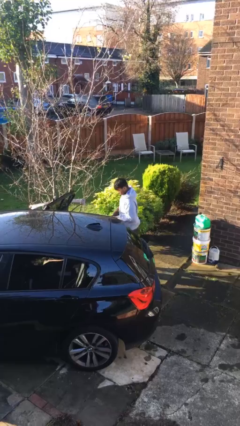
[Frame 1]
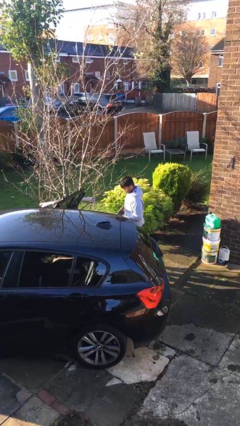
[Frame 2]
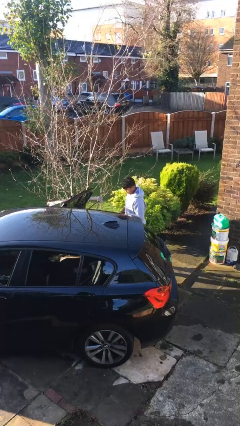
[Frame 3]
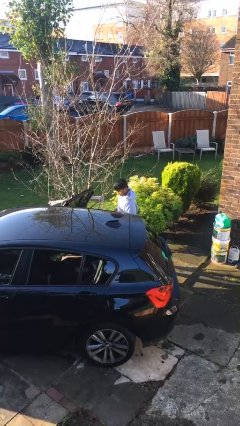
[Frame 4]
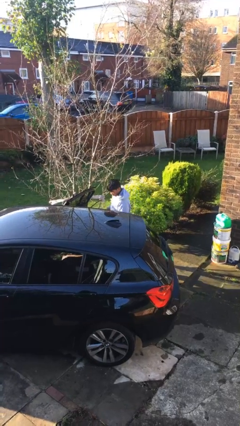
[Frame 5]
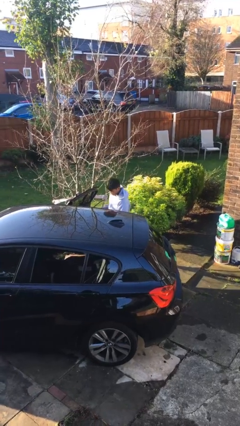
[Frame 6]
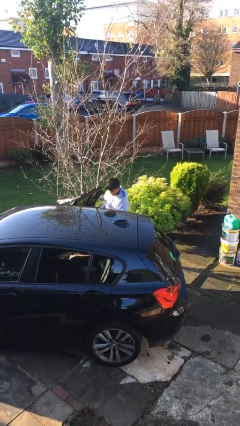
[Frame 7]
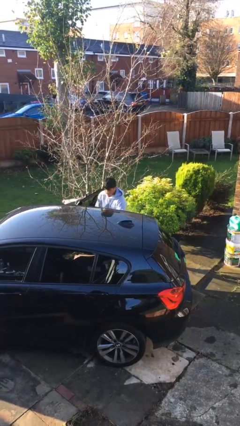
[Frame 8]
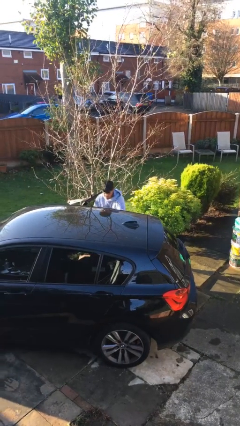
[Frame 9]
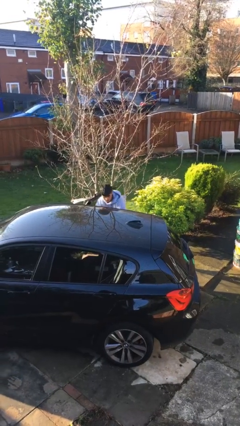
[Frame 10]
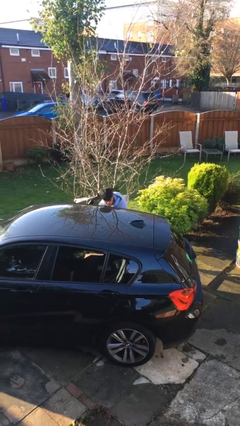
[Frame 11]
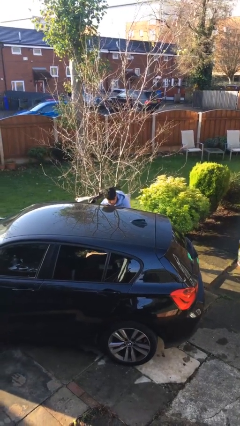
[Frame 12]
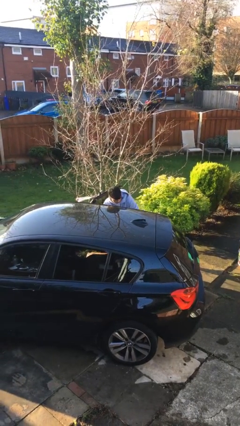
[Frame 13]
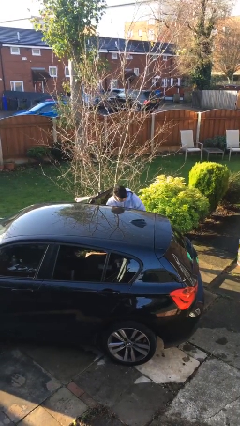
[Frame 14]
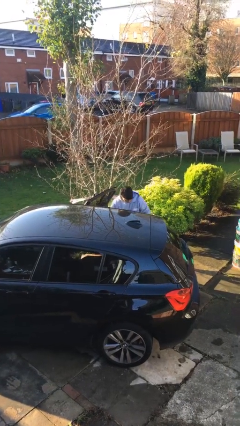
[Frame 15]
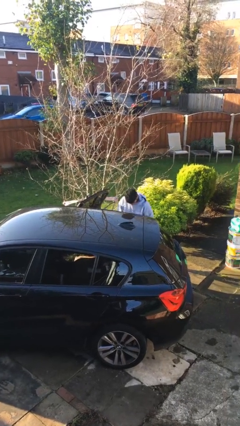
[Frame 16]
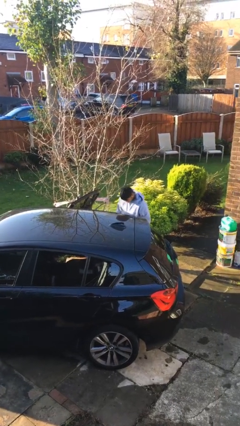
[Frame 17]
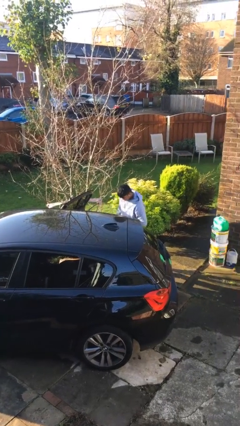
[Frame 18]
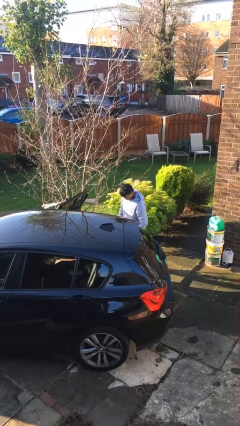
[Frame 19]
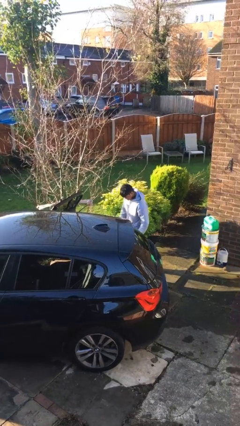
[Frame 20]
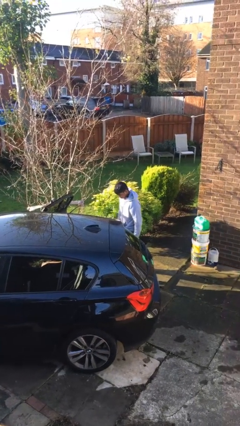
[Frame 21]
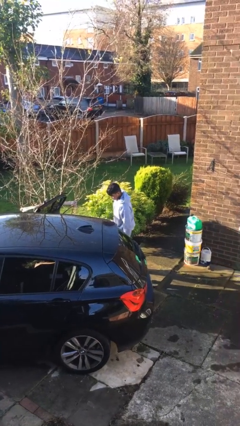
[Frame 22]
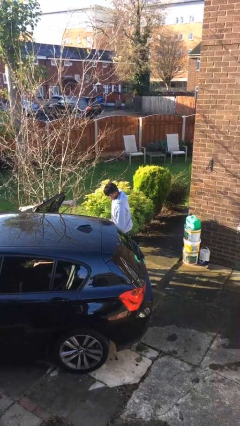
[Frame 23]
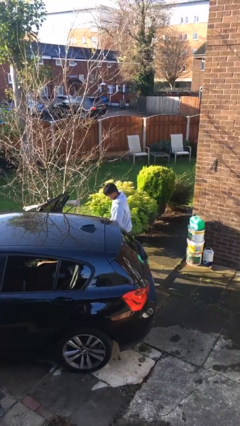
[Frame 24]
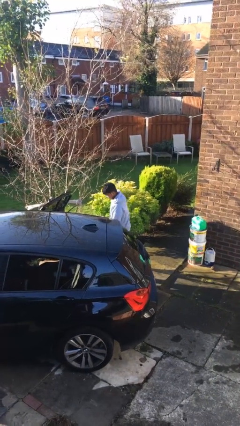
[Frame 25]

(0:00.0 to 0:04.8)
person loads car

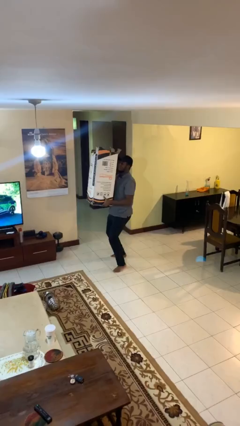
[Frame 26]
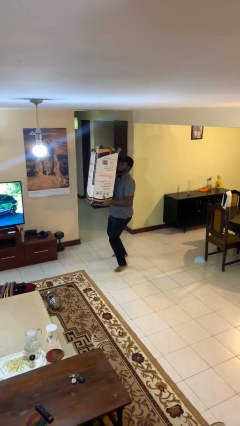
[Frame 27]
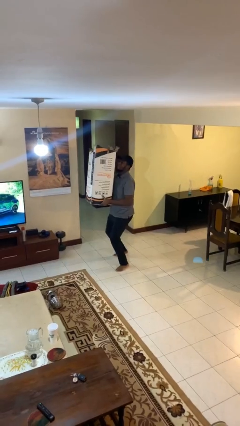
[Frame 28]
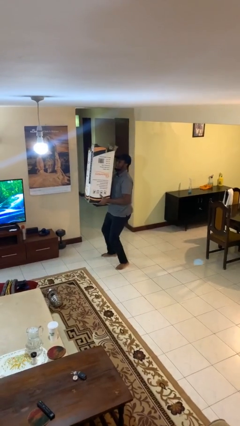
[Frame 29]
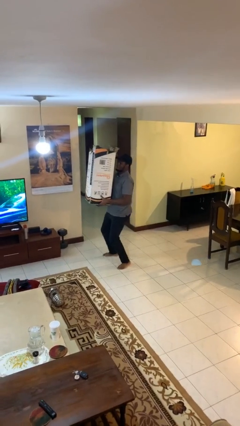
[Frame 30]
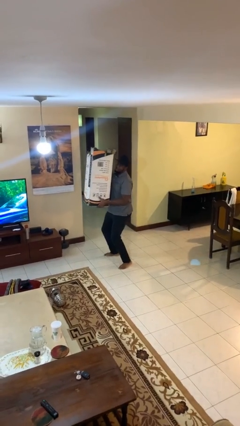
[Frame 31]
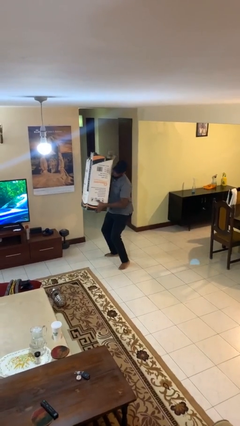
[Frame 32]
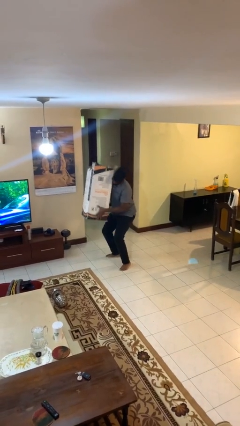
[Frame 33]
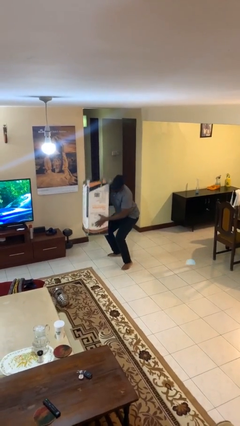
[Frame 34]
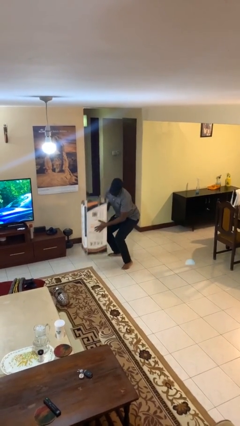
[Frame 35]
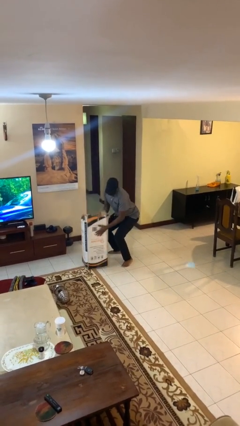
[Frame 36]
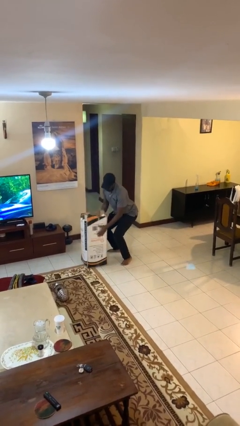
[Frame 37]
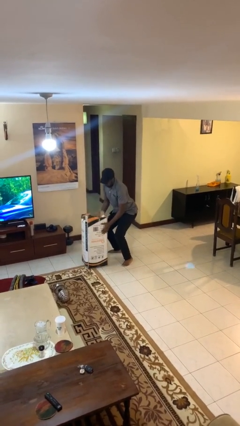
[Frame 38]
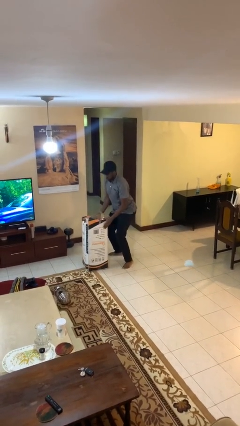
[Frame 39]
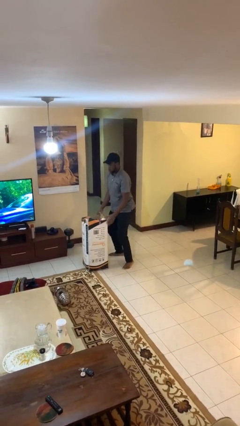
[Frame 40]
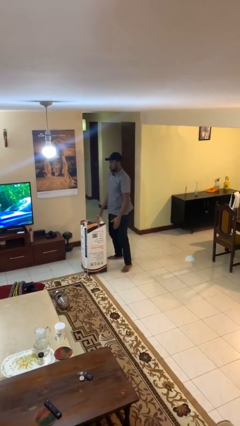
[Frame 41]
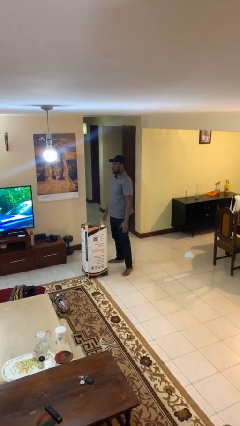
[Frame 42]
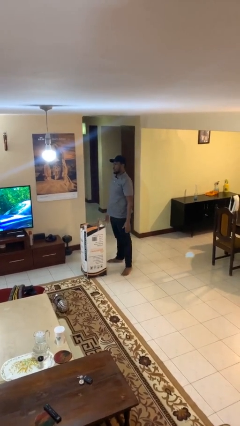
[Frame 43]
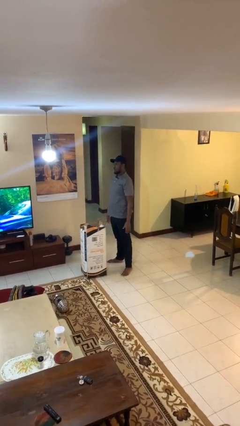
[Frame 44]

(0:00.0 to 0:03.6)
person puts down object on floor

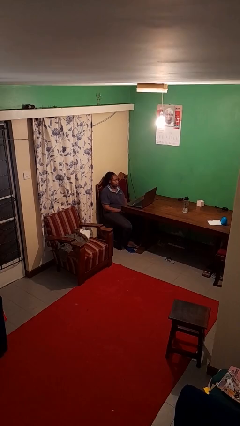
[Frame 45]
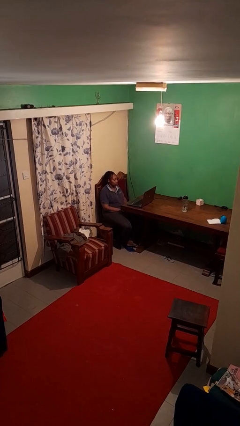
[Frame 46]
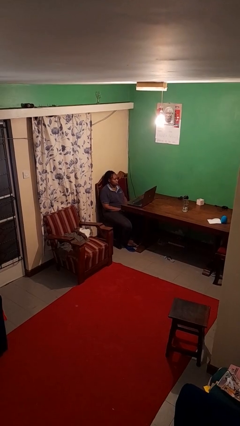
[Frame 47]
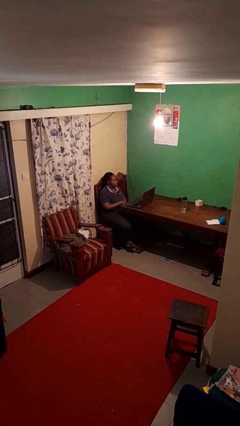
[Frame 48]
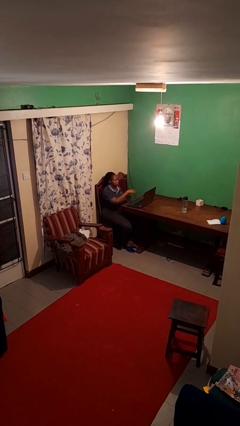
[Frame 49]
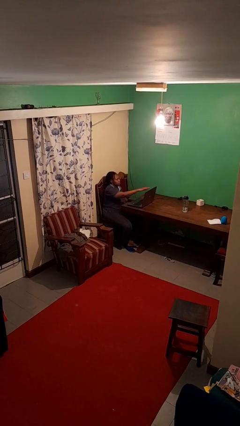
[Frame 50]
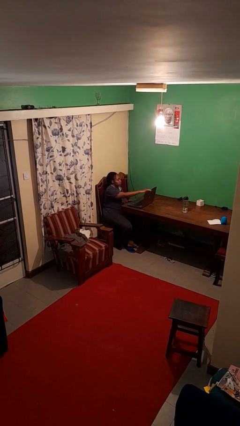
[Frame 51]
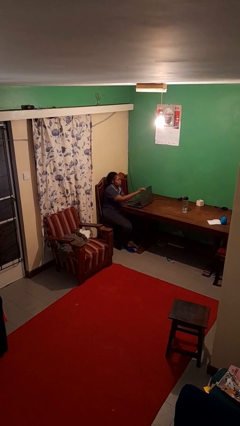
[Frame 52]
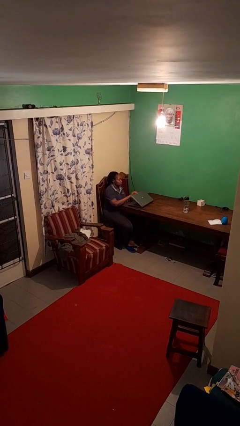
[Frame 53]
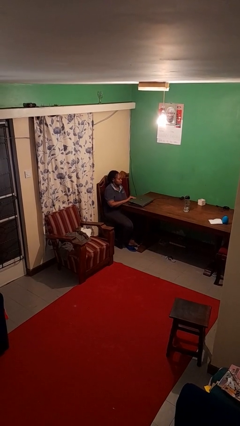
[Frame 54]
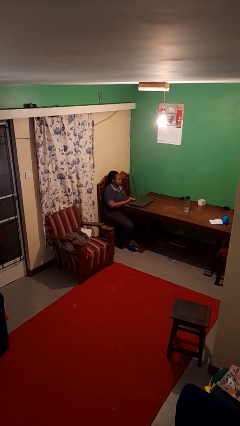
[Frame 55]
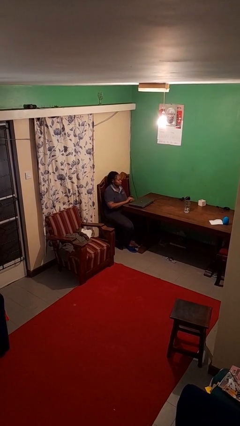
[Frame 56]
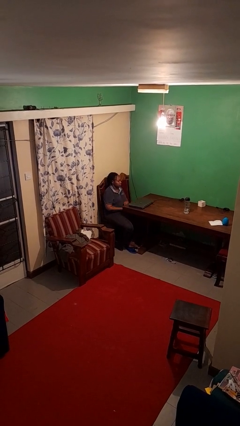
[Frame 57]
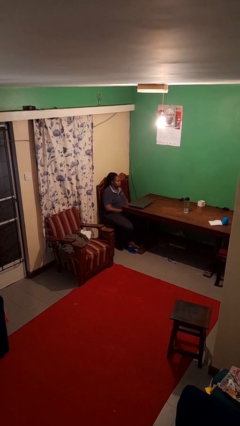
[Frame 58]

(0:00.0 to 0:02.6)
person closes laptop

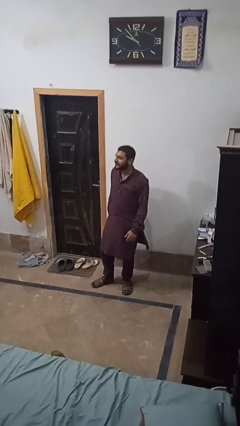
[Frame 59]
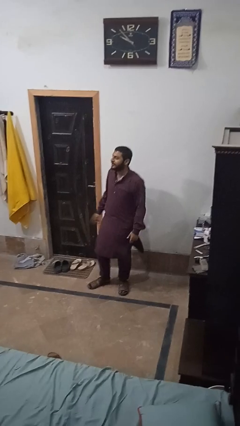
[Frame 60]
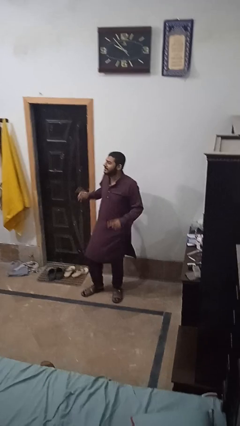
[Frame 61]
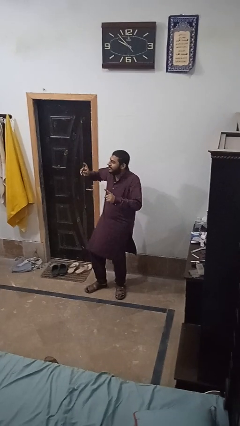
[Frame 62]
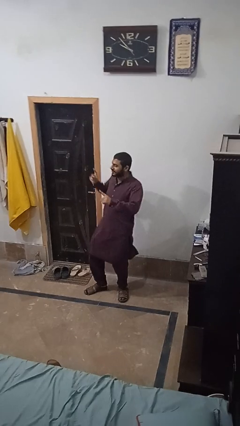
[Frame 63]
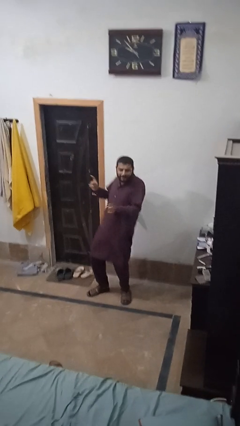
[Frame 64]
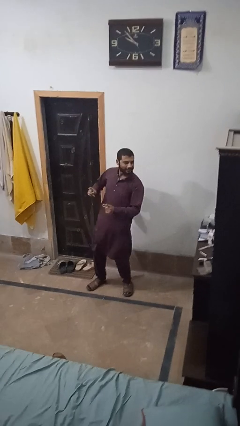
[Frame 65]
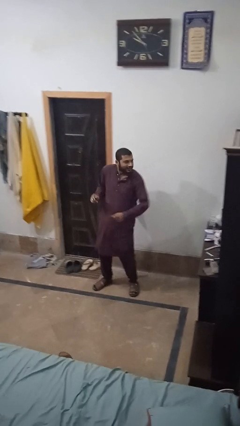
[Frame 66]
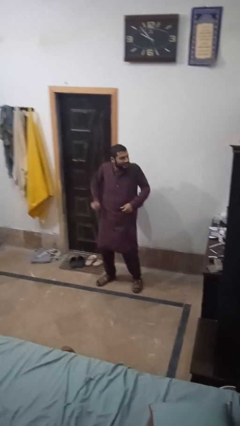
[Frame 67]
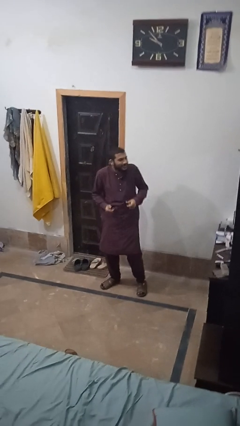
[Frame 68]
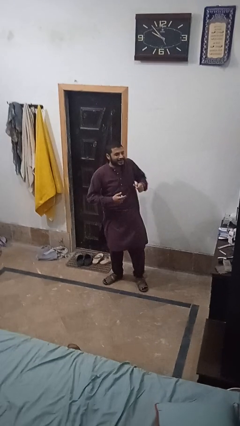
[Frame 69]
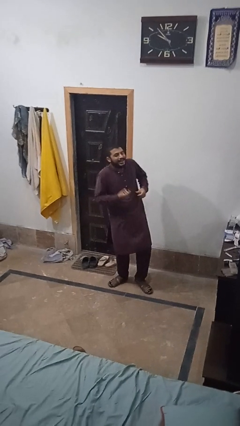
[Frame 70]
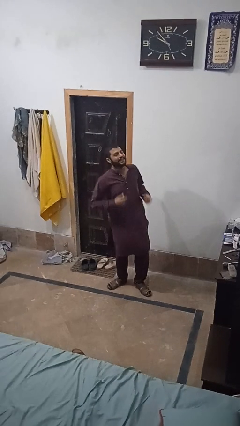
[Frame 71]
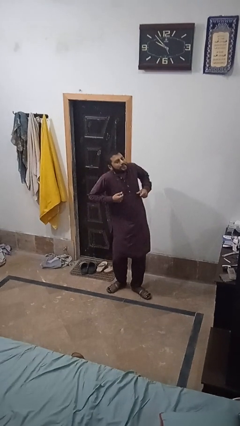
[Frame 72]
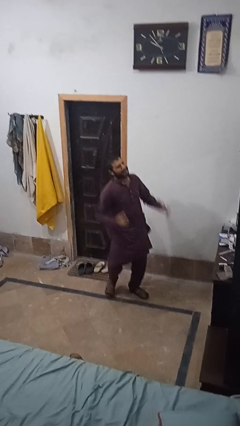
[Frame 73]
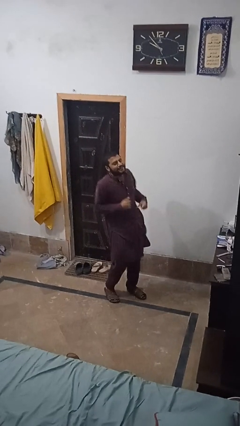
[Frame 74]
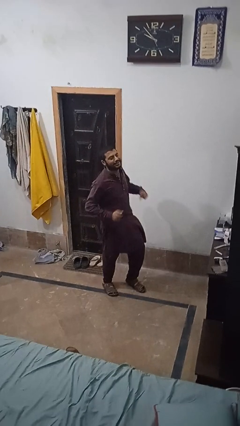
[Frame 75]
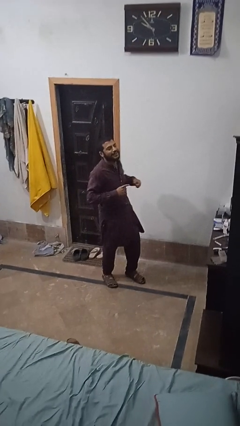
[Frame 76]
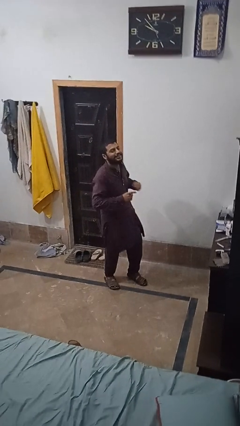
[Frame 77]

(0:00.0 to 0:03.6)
person dances in place

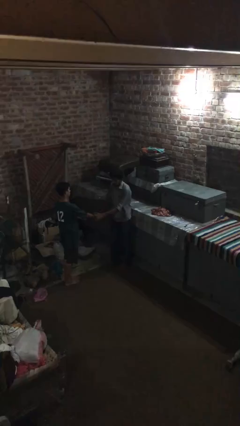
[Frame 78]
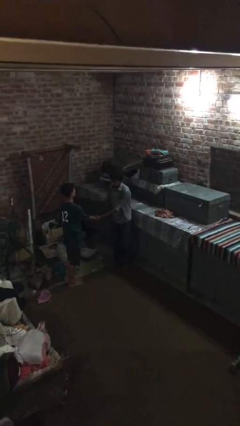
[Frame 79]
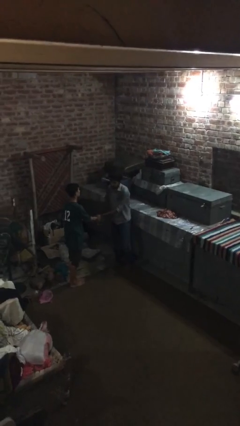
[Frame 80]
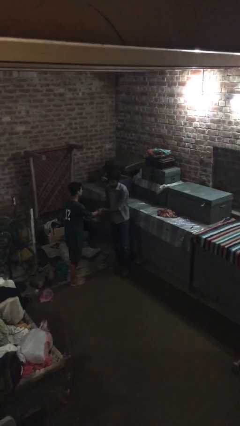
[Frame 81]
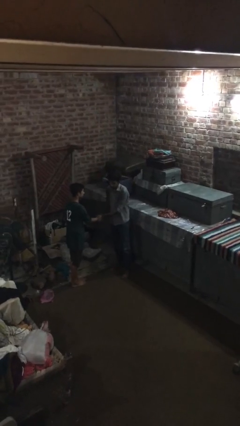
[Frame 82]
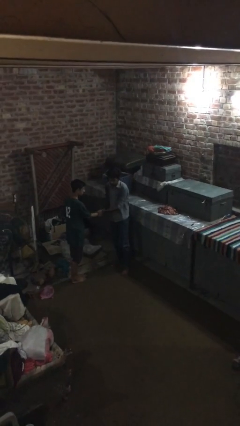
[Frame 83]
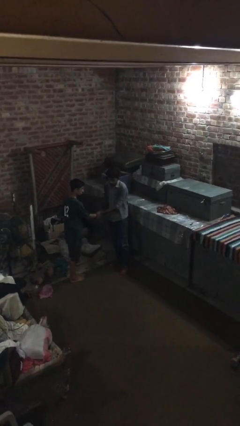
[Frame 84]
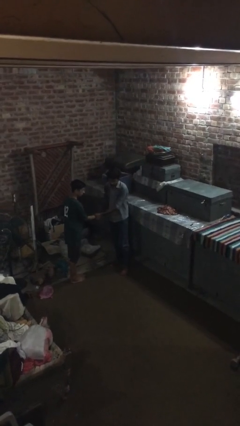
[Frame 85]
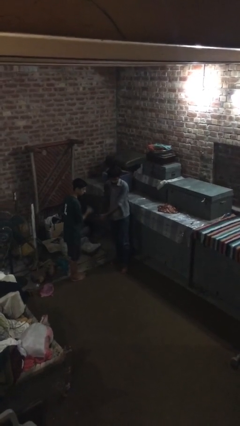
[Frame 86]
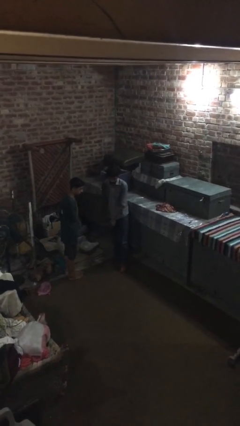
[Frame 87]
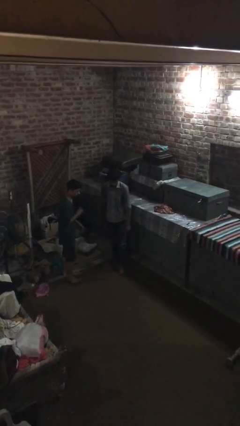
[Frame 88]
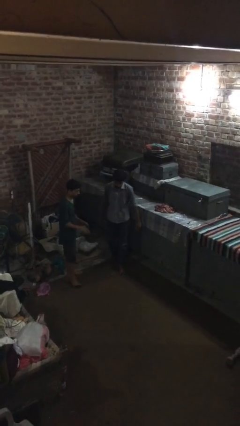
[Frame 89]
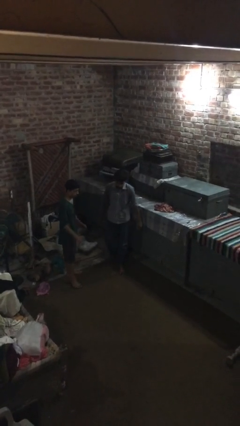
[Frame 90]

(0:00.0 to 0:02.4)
person shakes hand

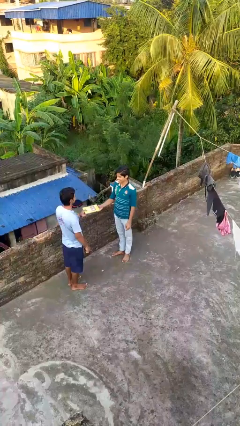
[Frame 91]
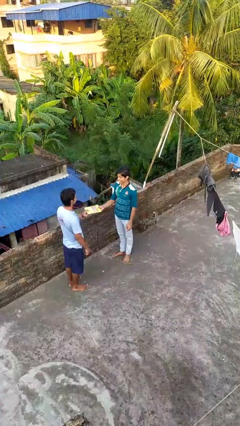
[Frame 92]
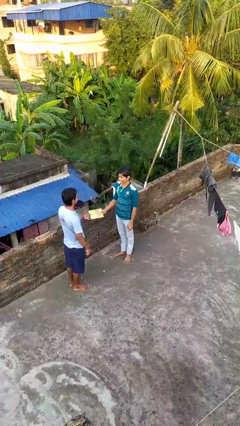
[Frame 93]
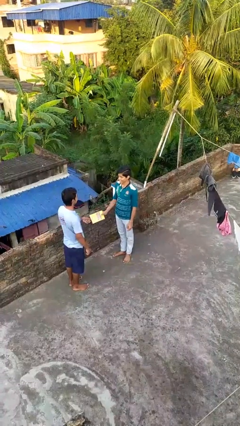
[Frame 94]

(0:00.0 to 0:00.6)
person transfers object to person
